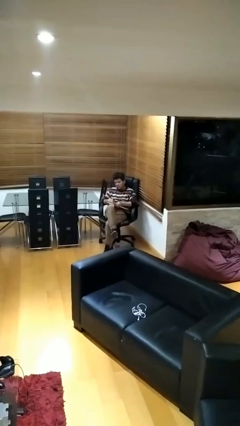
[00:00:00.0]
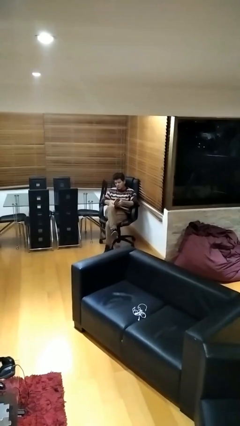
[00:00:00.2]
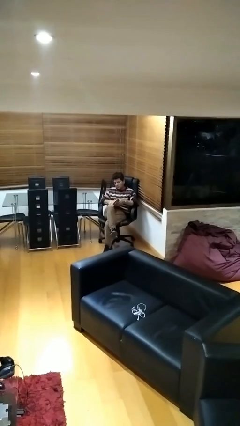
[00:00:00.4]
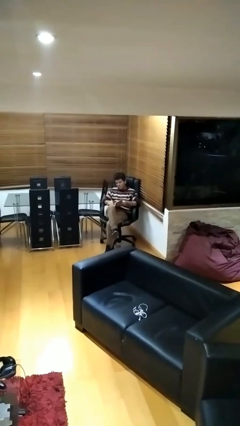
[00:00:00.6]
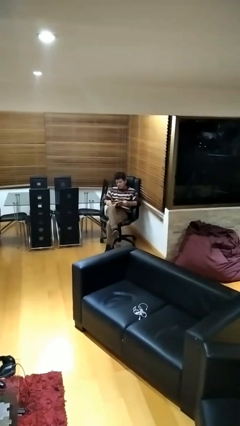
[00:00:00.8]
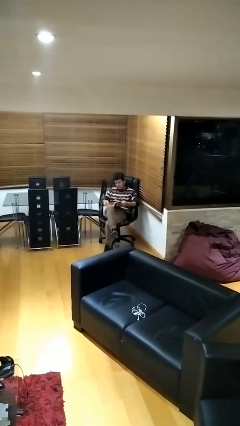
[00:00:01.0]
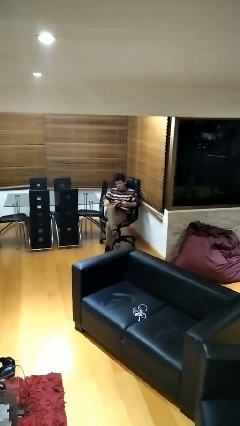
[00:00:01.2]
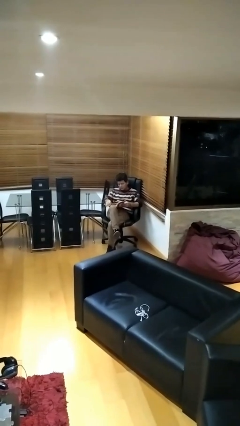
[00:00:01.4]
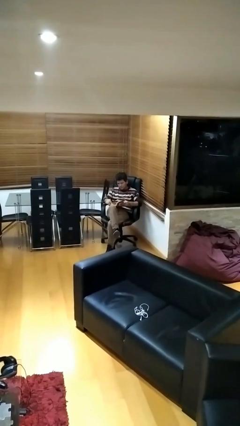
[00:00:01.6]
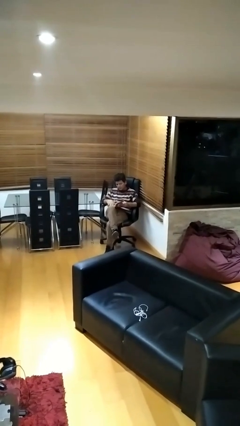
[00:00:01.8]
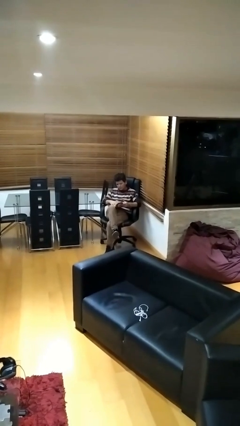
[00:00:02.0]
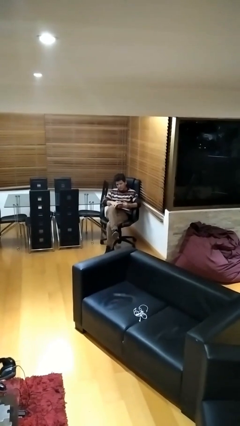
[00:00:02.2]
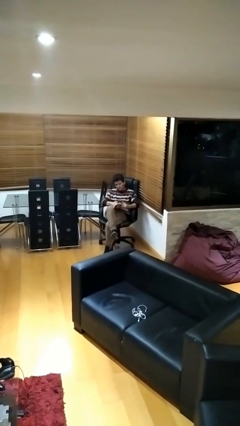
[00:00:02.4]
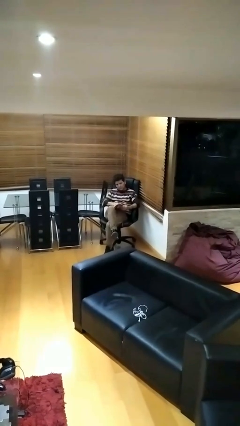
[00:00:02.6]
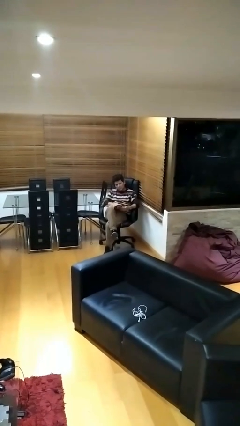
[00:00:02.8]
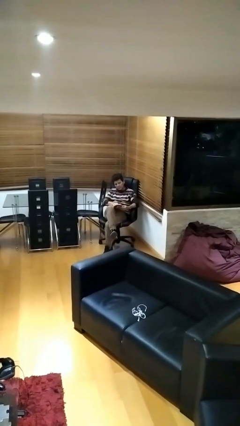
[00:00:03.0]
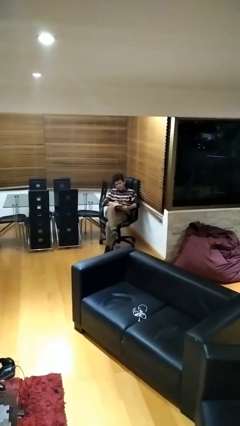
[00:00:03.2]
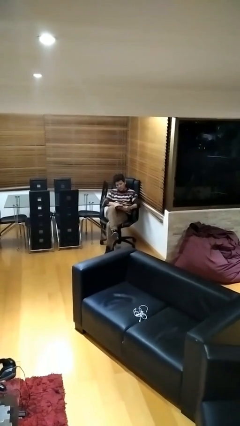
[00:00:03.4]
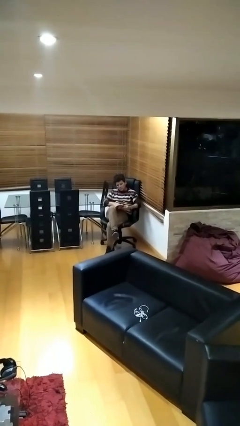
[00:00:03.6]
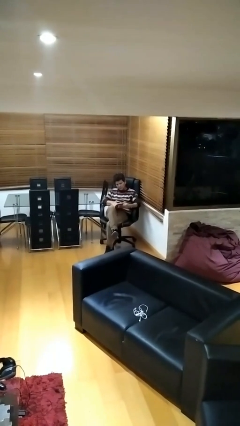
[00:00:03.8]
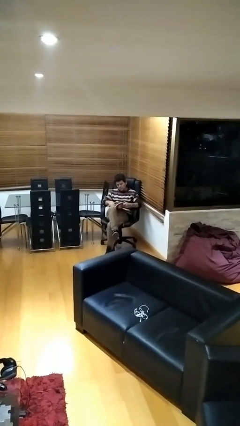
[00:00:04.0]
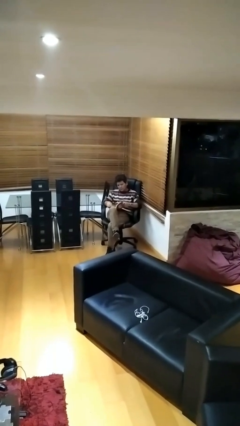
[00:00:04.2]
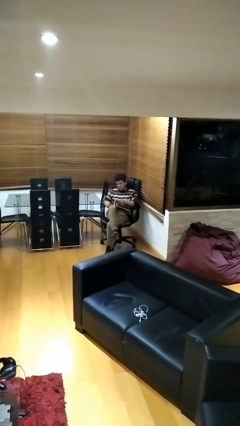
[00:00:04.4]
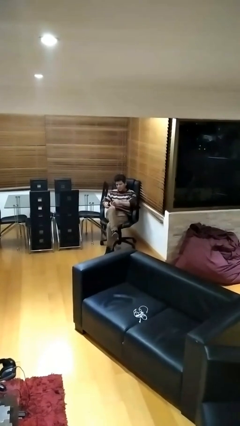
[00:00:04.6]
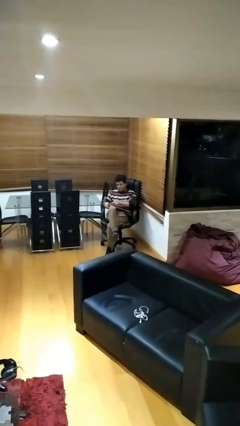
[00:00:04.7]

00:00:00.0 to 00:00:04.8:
person reads document

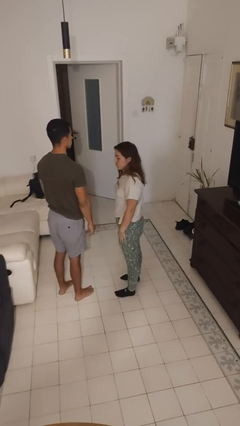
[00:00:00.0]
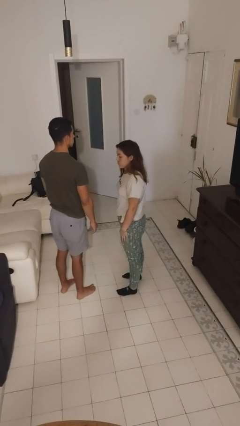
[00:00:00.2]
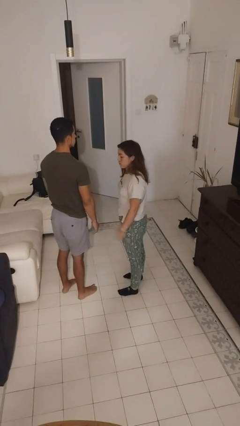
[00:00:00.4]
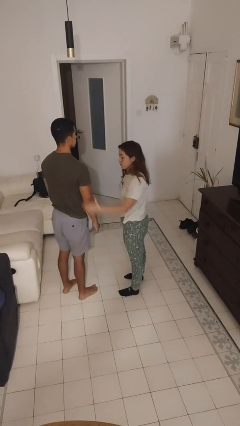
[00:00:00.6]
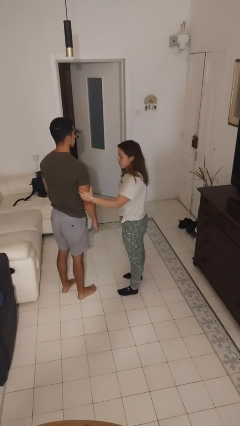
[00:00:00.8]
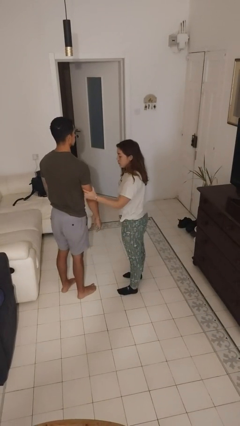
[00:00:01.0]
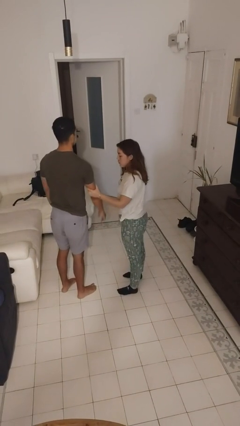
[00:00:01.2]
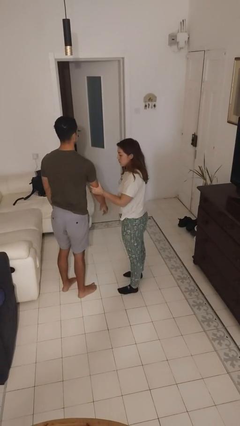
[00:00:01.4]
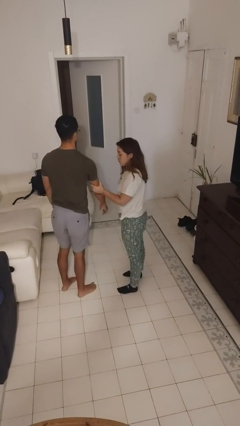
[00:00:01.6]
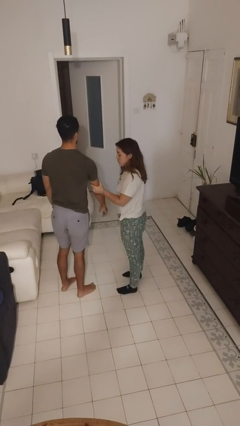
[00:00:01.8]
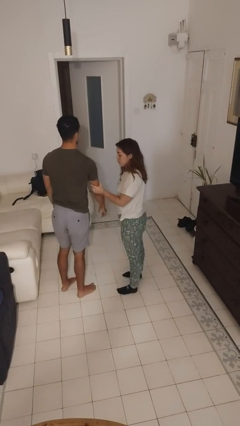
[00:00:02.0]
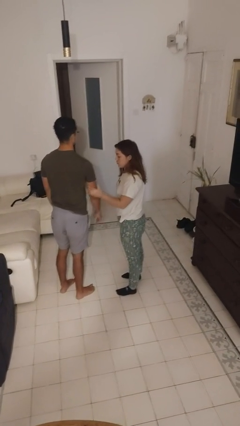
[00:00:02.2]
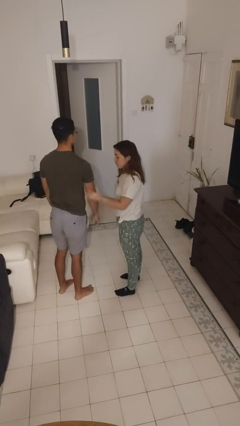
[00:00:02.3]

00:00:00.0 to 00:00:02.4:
person grabs person by bicep

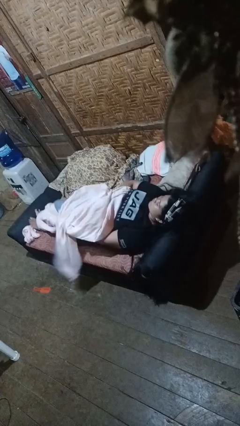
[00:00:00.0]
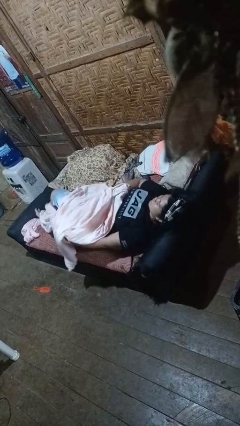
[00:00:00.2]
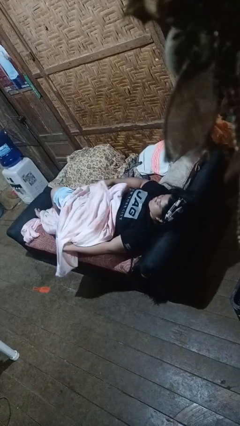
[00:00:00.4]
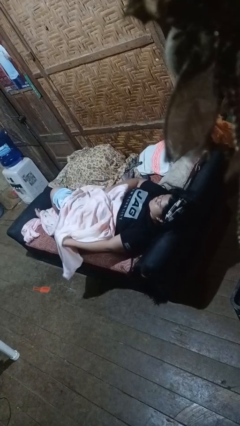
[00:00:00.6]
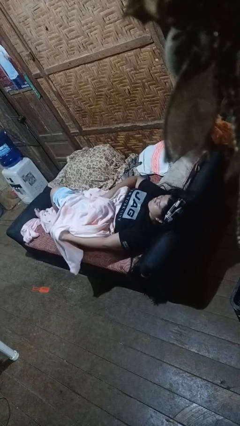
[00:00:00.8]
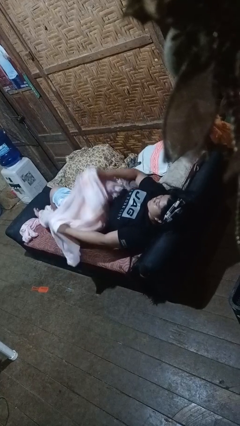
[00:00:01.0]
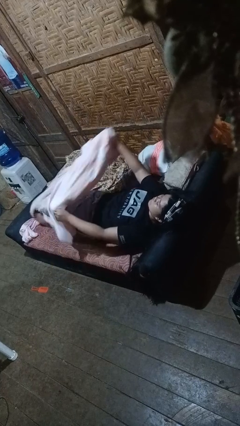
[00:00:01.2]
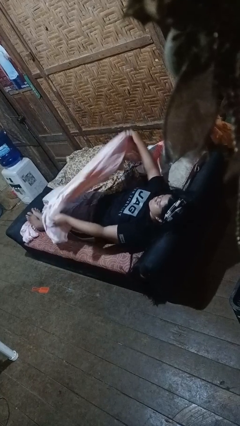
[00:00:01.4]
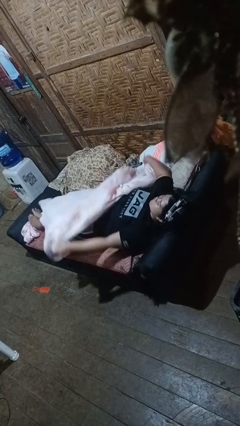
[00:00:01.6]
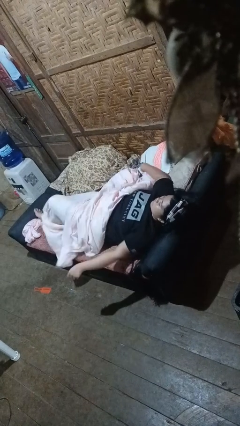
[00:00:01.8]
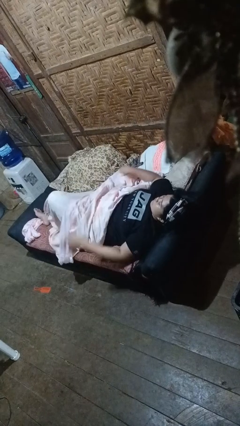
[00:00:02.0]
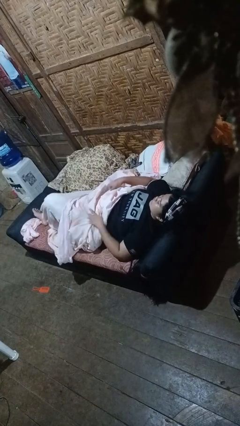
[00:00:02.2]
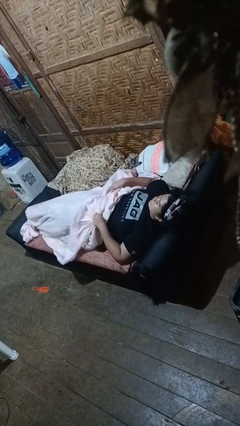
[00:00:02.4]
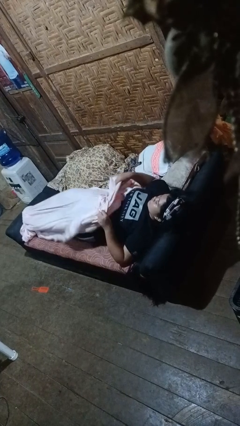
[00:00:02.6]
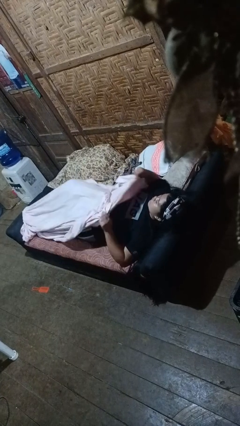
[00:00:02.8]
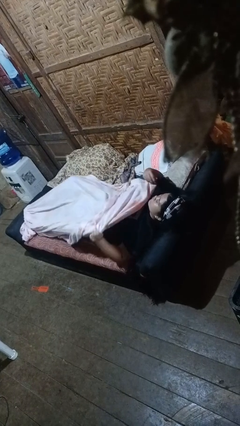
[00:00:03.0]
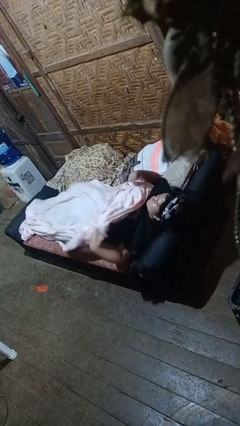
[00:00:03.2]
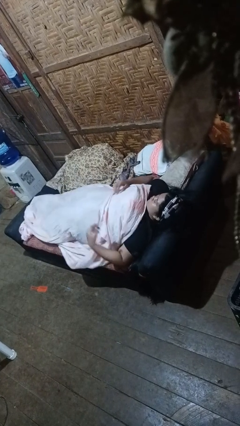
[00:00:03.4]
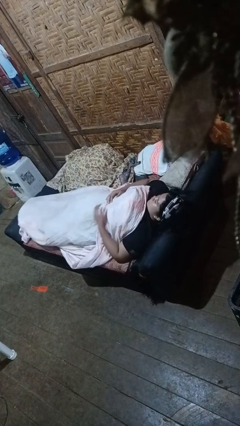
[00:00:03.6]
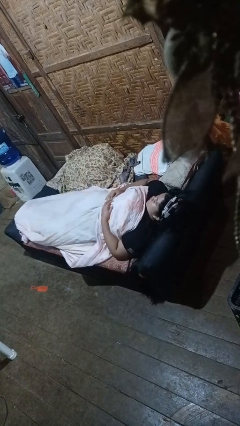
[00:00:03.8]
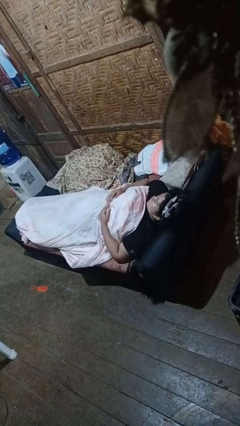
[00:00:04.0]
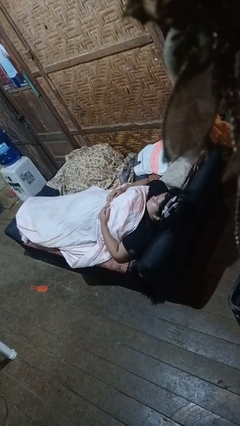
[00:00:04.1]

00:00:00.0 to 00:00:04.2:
person covers with bedsheets

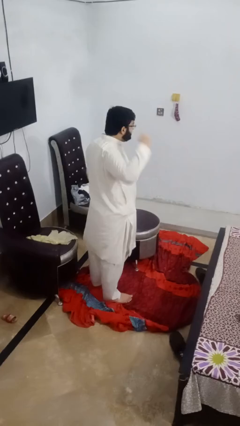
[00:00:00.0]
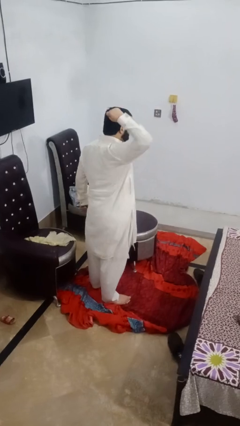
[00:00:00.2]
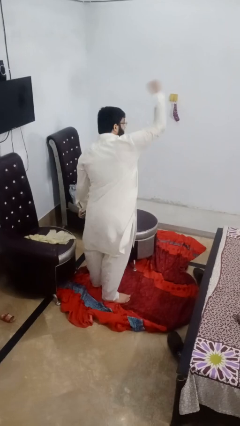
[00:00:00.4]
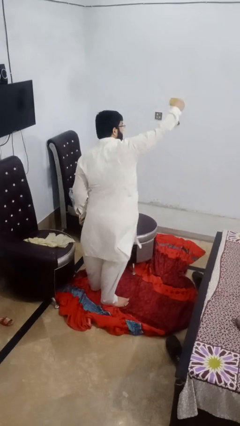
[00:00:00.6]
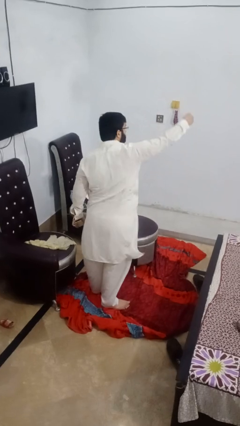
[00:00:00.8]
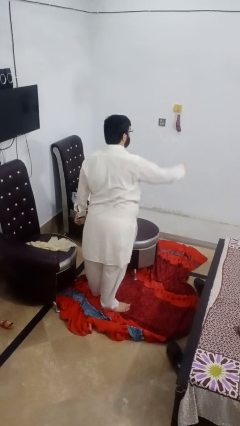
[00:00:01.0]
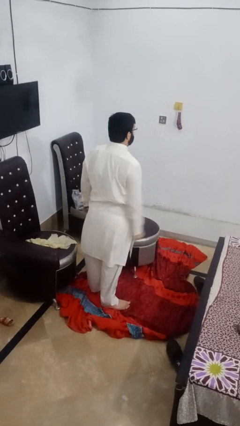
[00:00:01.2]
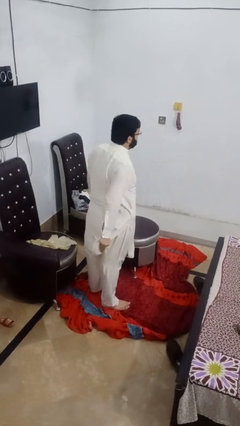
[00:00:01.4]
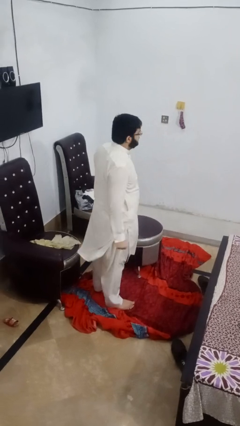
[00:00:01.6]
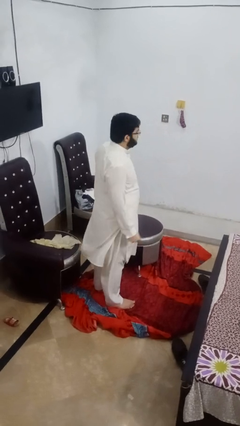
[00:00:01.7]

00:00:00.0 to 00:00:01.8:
person punches

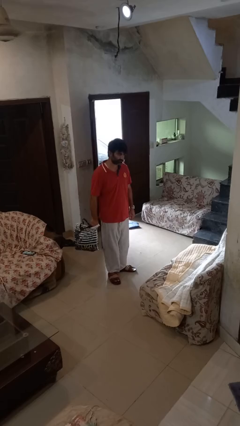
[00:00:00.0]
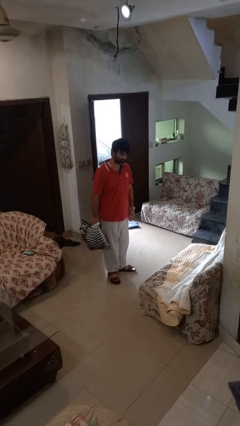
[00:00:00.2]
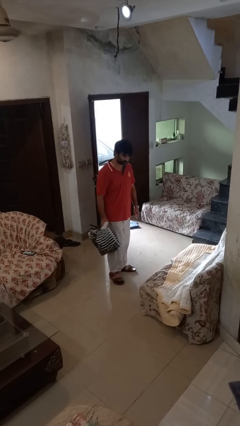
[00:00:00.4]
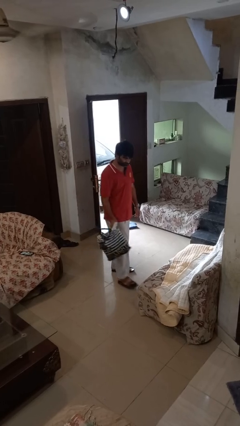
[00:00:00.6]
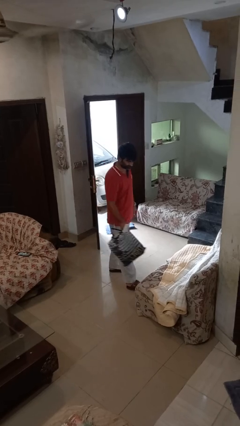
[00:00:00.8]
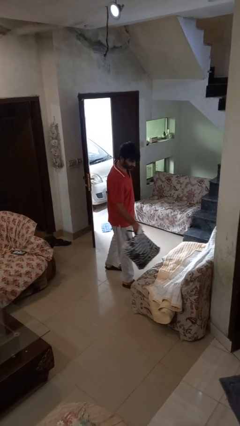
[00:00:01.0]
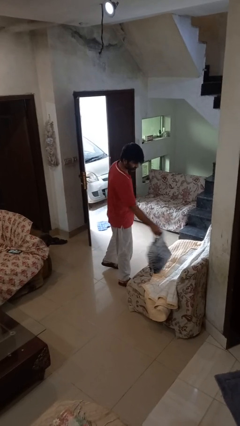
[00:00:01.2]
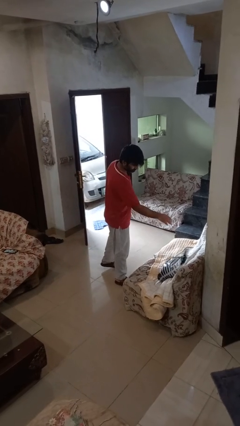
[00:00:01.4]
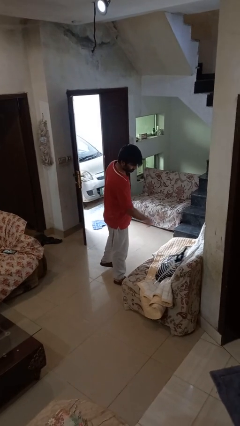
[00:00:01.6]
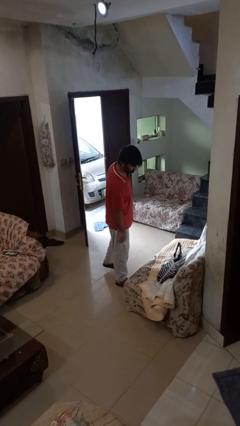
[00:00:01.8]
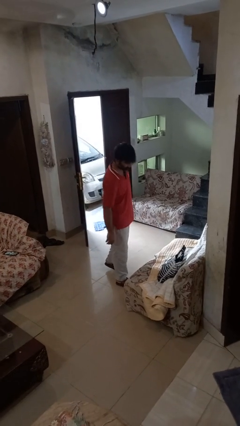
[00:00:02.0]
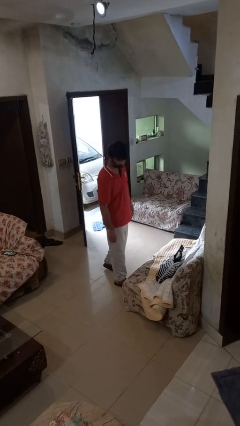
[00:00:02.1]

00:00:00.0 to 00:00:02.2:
person puts down object on couch

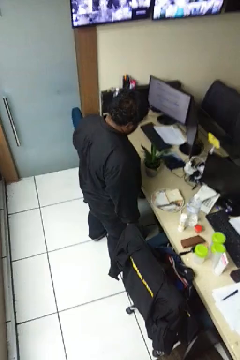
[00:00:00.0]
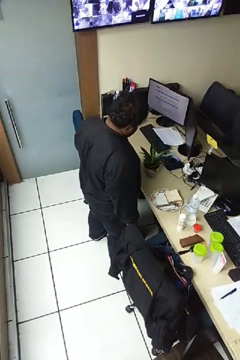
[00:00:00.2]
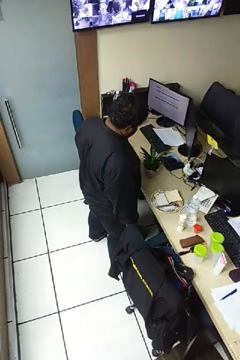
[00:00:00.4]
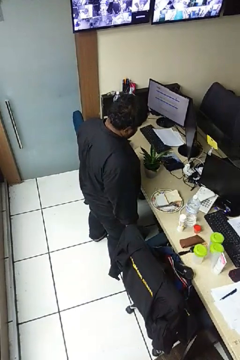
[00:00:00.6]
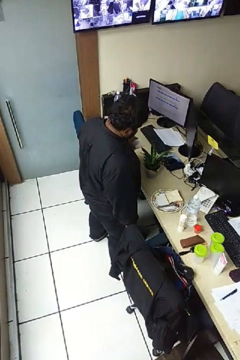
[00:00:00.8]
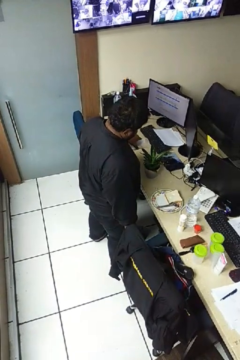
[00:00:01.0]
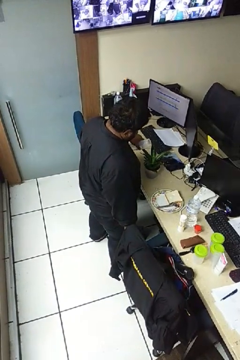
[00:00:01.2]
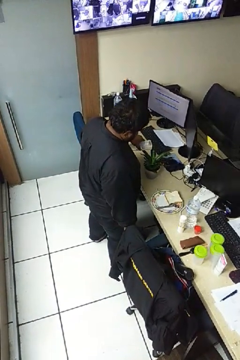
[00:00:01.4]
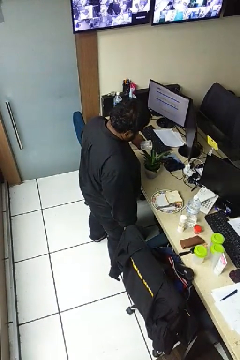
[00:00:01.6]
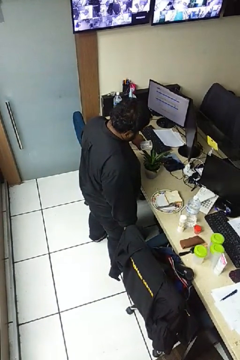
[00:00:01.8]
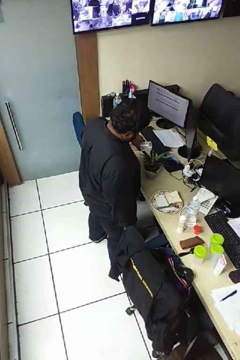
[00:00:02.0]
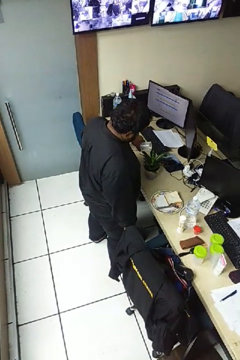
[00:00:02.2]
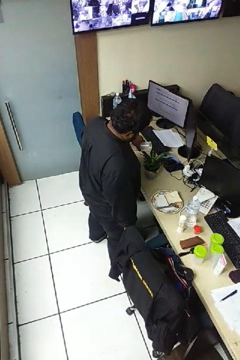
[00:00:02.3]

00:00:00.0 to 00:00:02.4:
person waters houseplant
